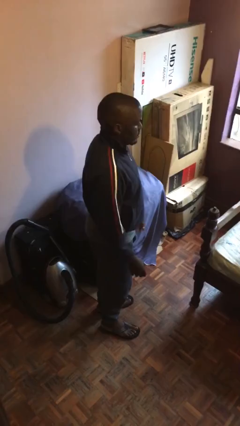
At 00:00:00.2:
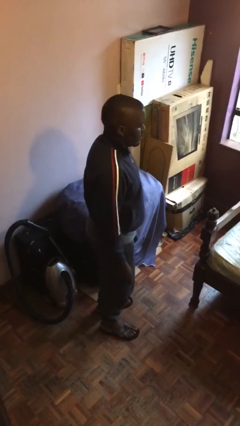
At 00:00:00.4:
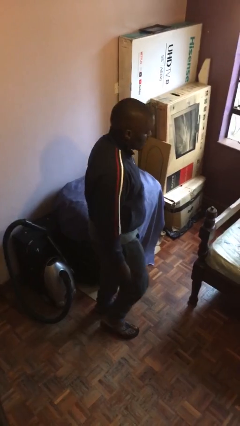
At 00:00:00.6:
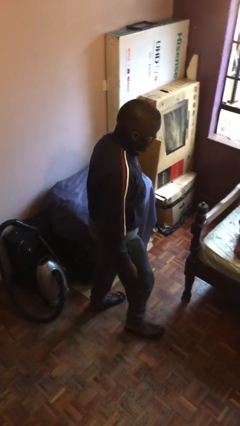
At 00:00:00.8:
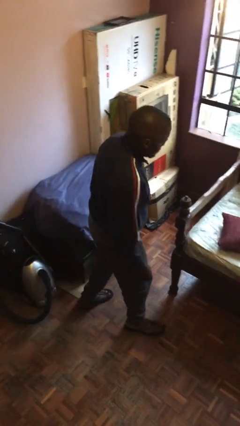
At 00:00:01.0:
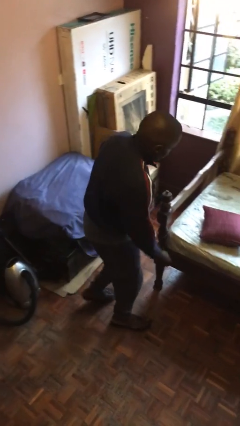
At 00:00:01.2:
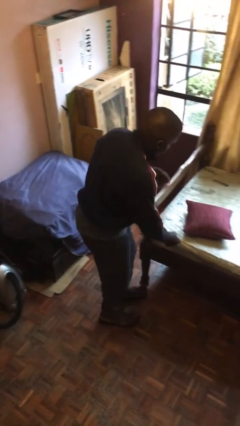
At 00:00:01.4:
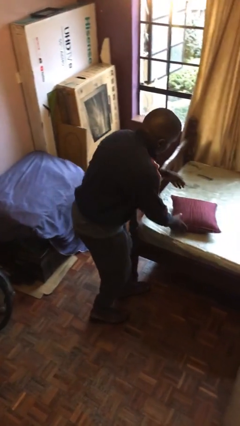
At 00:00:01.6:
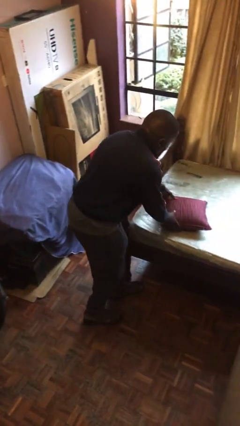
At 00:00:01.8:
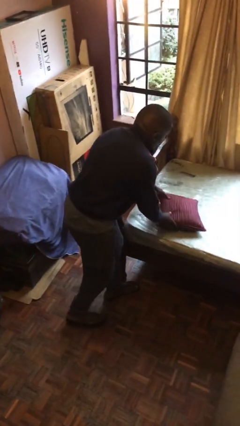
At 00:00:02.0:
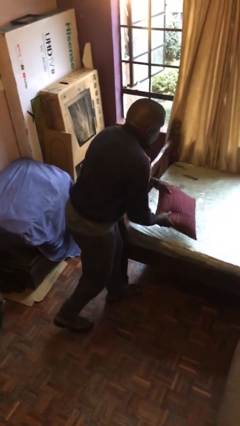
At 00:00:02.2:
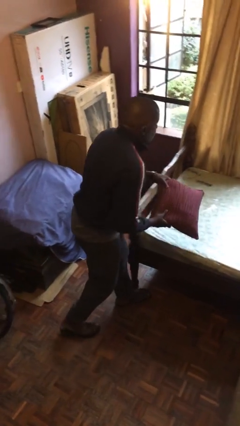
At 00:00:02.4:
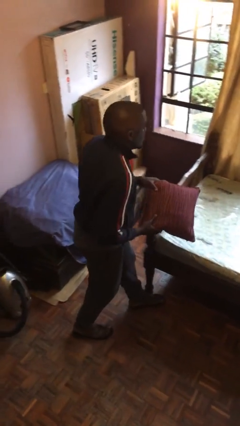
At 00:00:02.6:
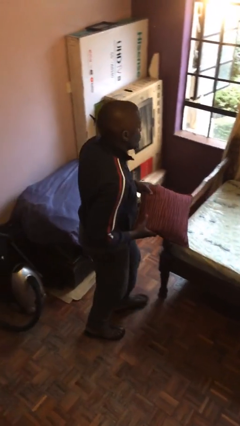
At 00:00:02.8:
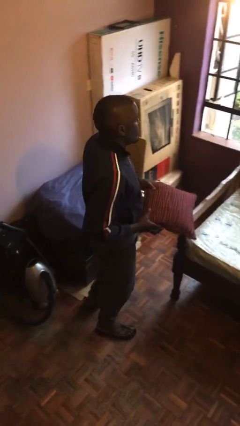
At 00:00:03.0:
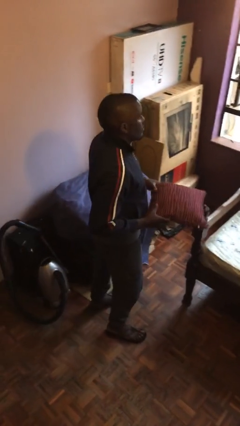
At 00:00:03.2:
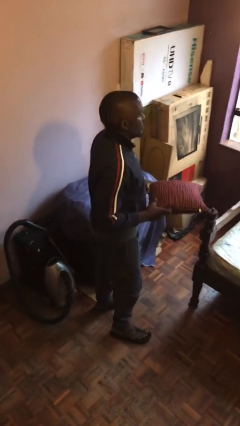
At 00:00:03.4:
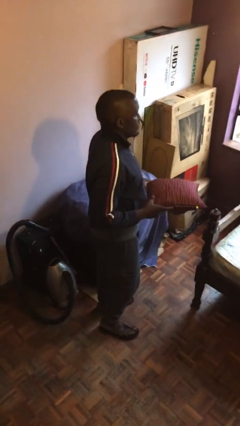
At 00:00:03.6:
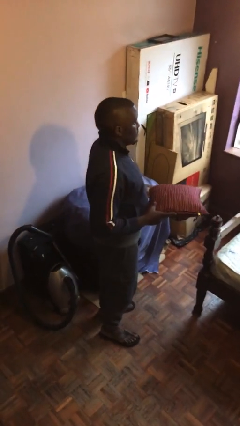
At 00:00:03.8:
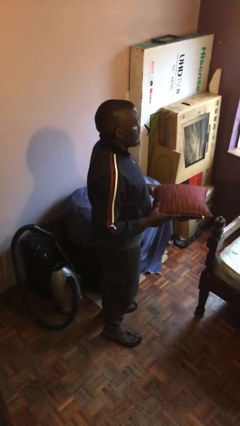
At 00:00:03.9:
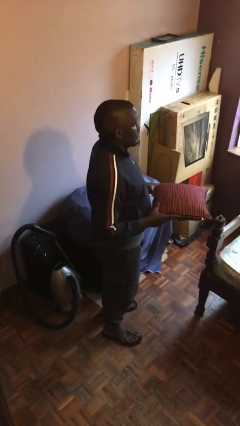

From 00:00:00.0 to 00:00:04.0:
person picks up object from bed

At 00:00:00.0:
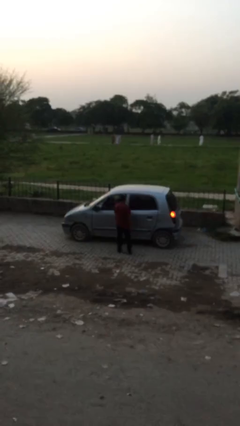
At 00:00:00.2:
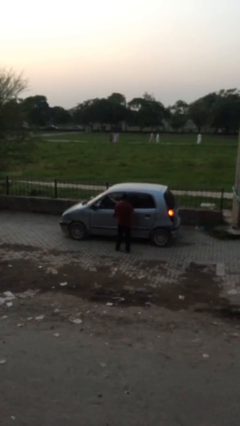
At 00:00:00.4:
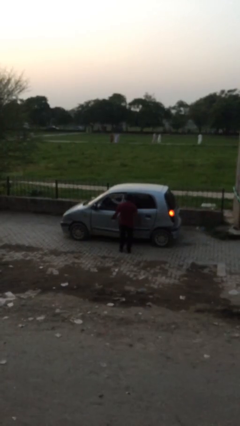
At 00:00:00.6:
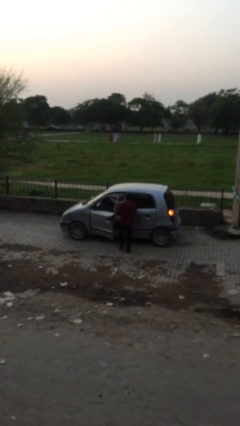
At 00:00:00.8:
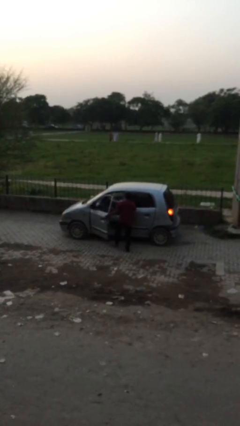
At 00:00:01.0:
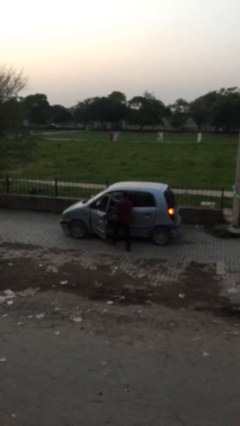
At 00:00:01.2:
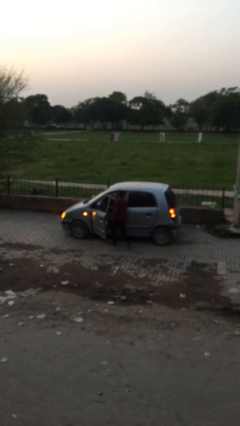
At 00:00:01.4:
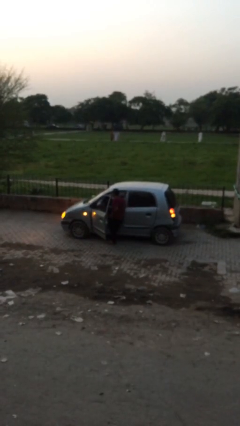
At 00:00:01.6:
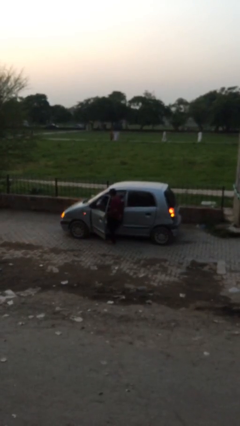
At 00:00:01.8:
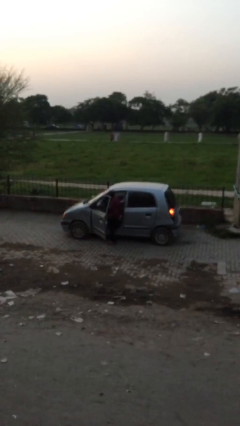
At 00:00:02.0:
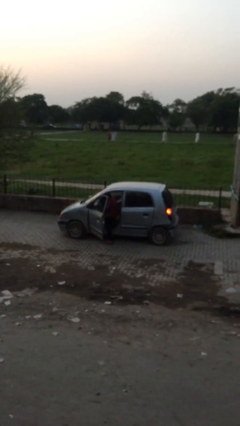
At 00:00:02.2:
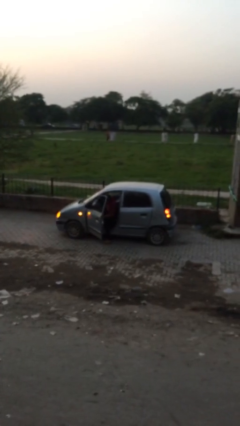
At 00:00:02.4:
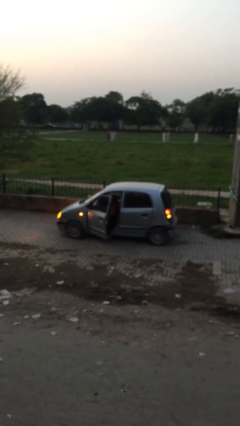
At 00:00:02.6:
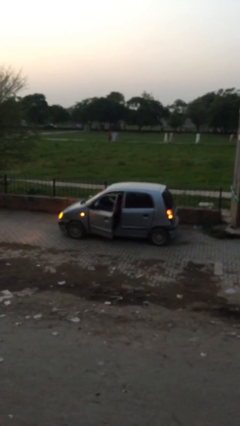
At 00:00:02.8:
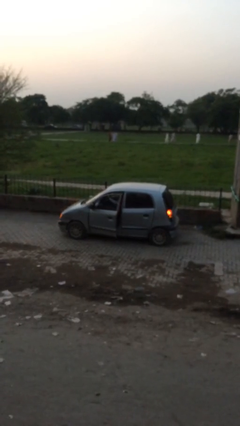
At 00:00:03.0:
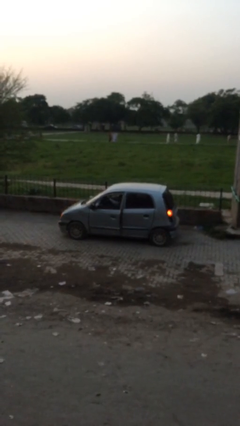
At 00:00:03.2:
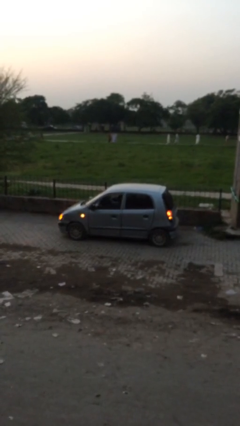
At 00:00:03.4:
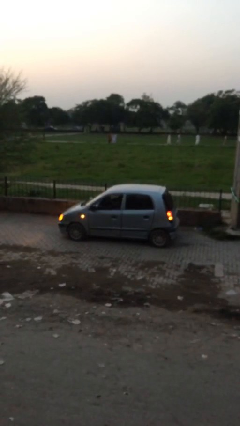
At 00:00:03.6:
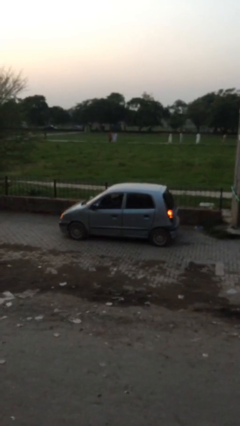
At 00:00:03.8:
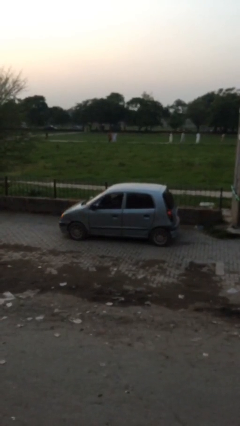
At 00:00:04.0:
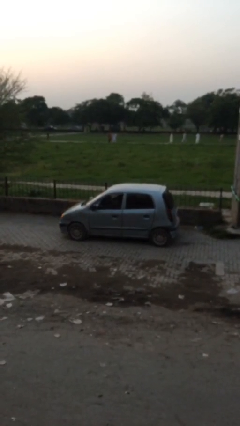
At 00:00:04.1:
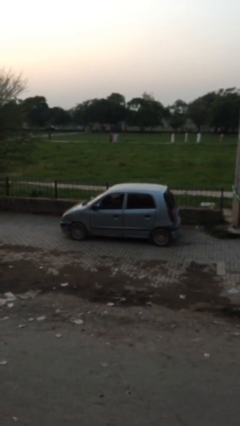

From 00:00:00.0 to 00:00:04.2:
car picks up person

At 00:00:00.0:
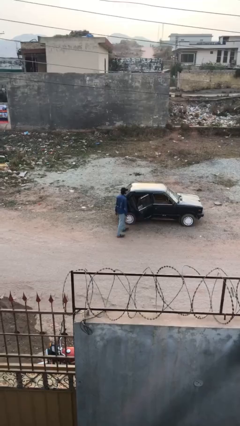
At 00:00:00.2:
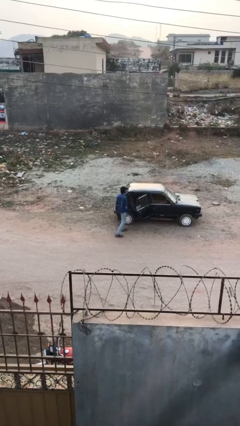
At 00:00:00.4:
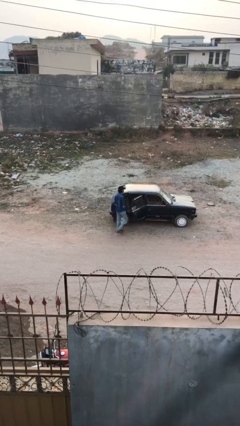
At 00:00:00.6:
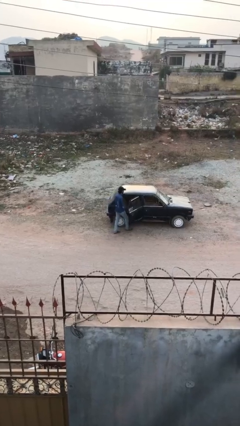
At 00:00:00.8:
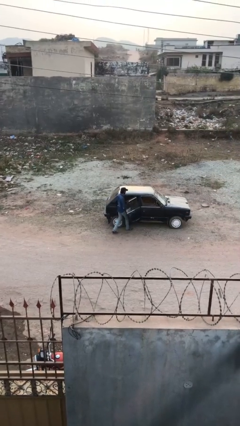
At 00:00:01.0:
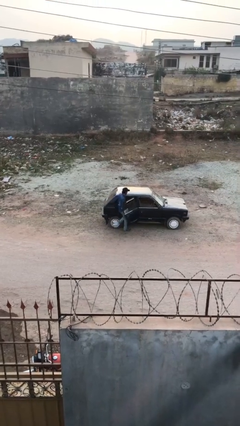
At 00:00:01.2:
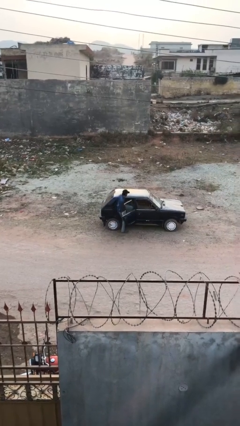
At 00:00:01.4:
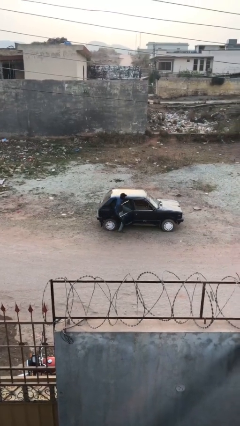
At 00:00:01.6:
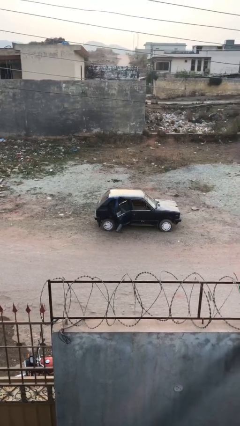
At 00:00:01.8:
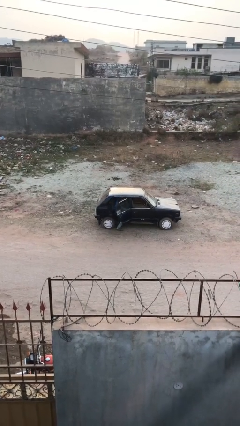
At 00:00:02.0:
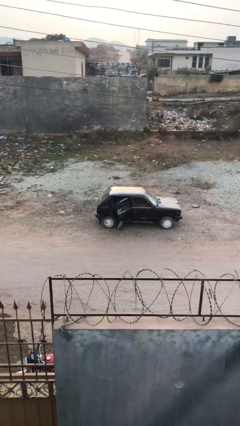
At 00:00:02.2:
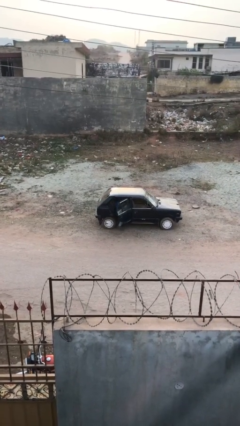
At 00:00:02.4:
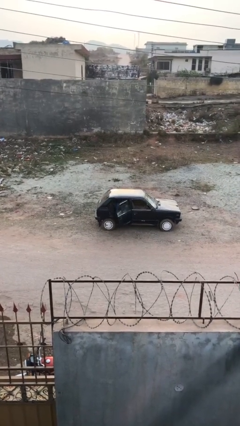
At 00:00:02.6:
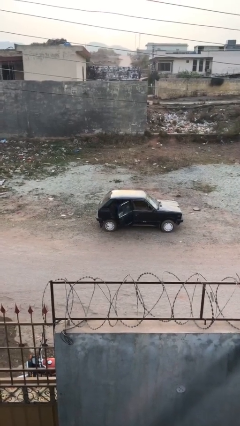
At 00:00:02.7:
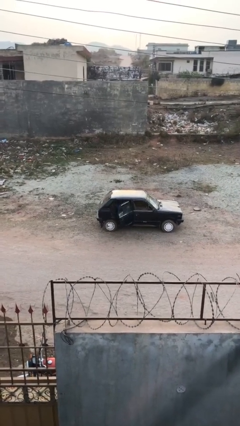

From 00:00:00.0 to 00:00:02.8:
person enters car

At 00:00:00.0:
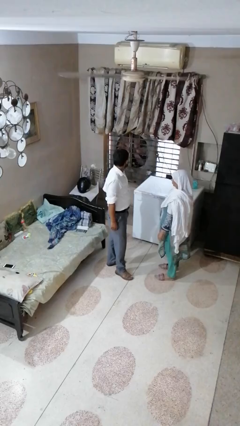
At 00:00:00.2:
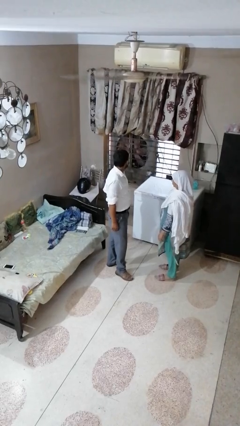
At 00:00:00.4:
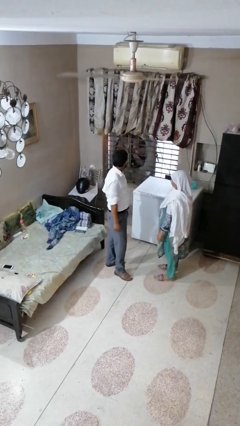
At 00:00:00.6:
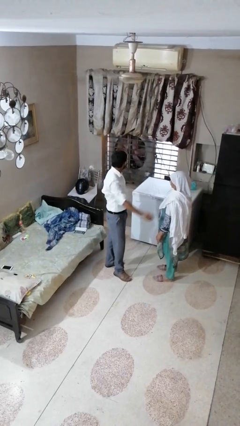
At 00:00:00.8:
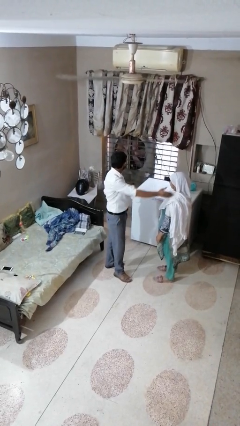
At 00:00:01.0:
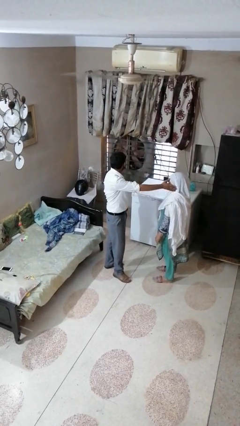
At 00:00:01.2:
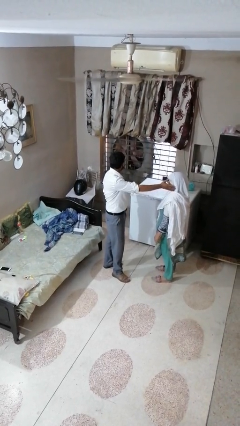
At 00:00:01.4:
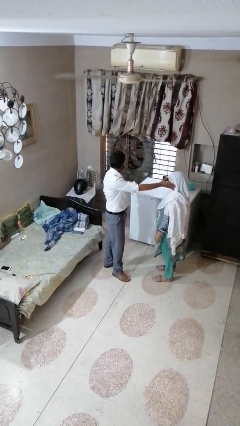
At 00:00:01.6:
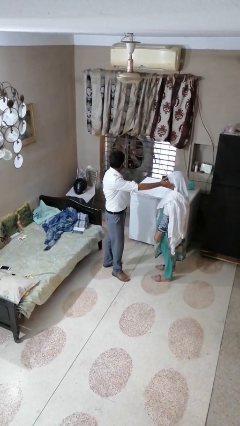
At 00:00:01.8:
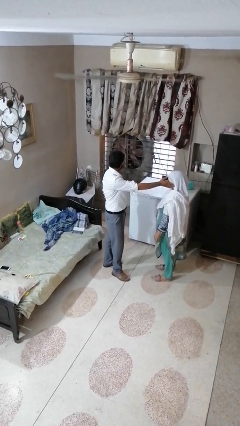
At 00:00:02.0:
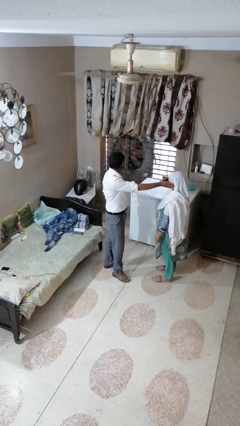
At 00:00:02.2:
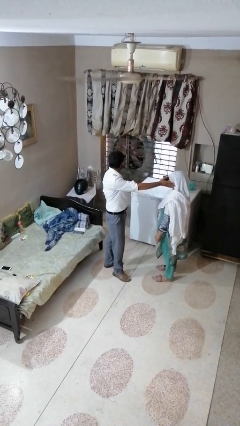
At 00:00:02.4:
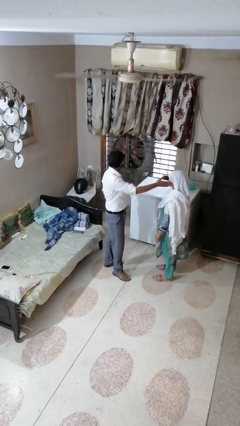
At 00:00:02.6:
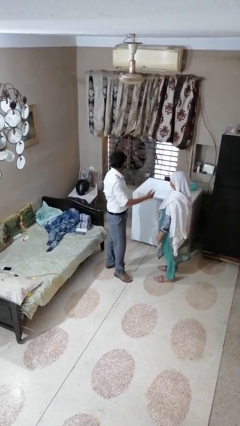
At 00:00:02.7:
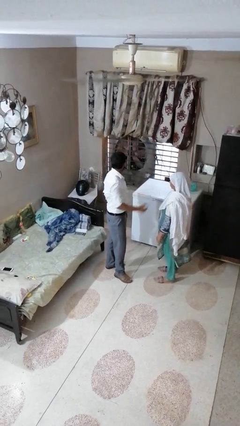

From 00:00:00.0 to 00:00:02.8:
person touches face of person

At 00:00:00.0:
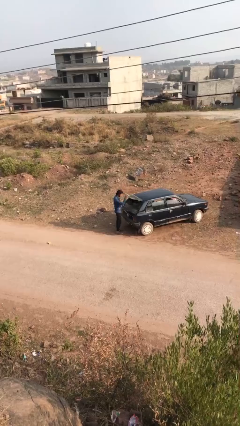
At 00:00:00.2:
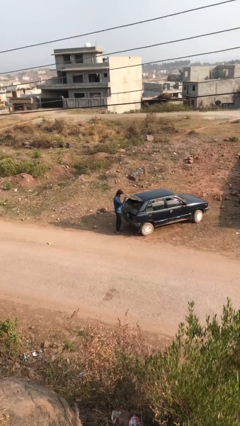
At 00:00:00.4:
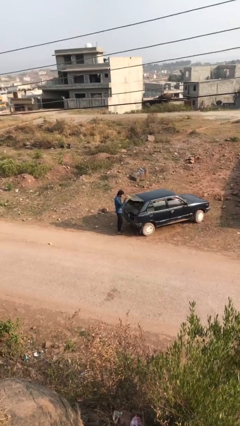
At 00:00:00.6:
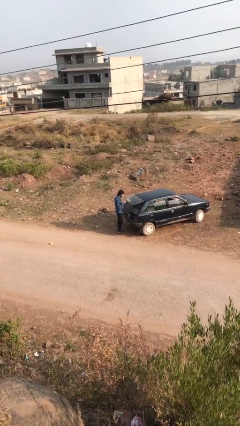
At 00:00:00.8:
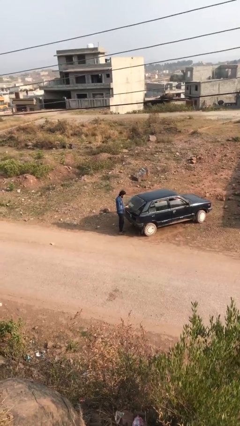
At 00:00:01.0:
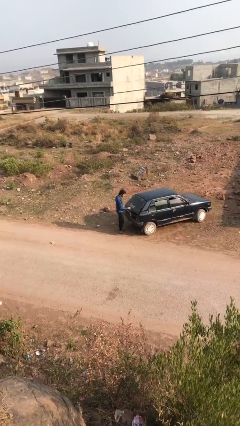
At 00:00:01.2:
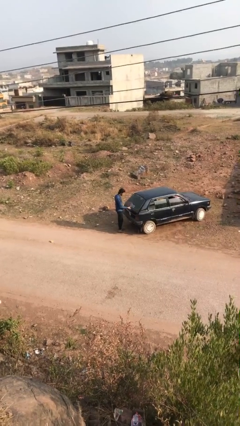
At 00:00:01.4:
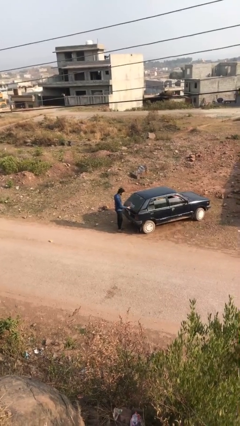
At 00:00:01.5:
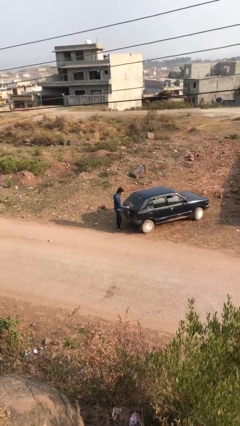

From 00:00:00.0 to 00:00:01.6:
person closes car trunk

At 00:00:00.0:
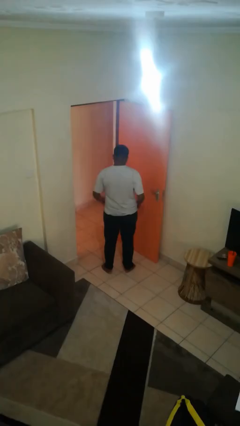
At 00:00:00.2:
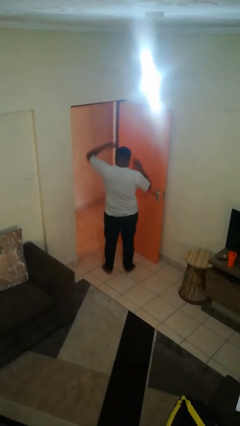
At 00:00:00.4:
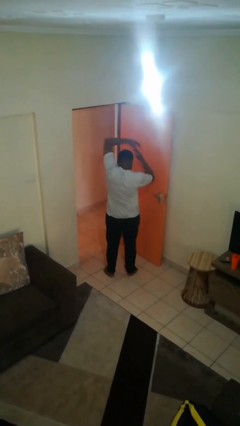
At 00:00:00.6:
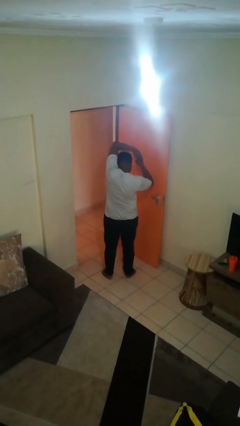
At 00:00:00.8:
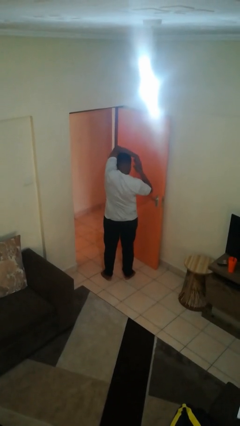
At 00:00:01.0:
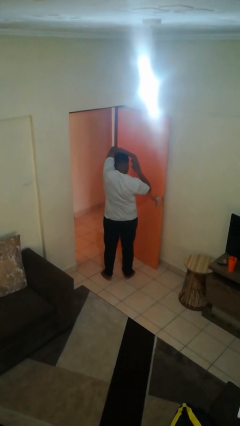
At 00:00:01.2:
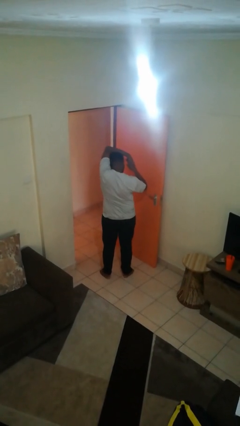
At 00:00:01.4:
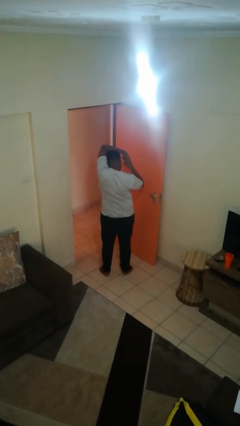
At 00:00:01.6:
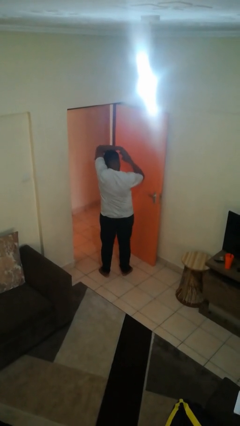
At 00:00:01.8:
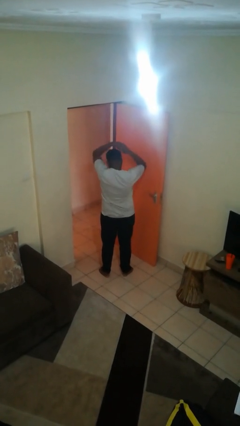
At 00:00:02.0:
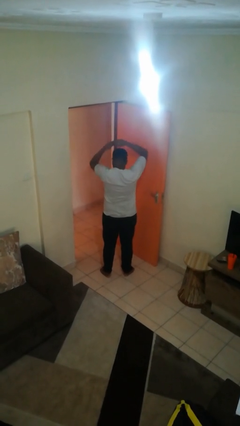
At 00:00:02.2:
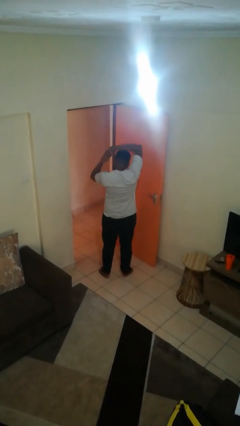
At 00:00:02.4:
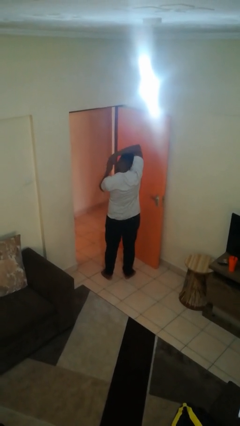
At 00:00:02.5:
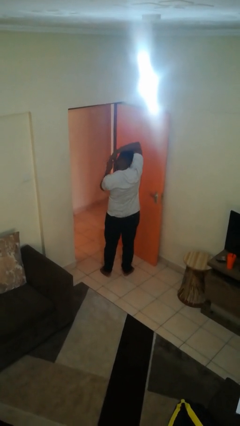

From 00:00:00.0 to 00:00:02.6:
person stretches arms over head
